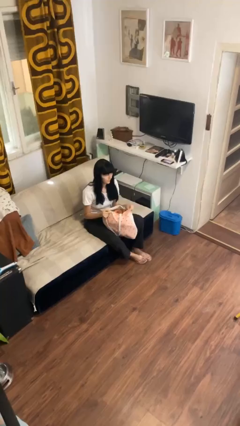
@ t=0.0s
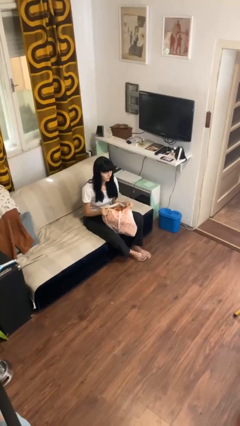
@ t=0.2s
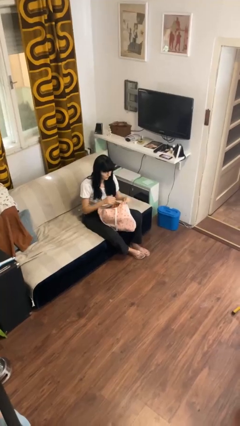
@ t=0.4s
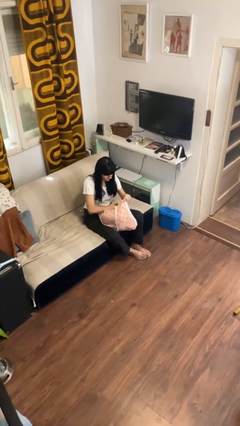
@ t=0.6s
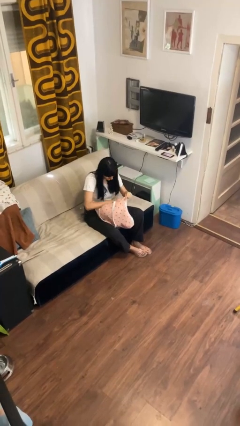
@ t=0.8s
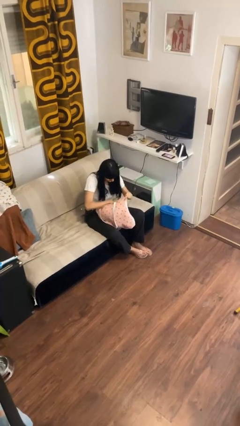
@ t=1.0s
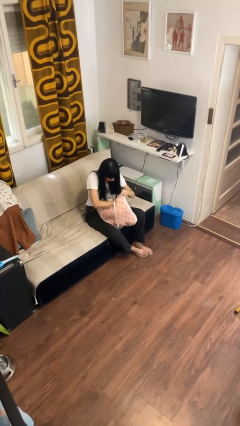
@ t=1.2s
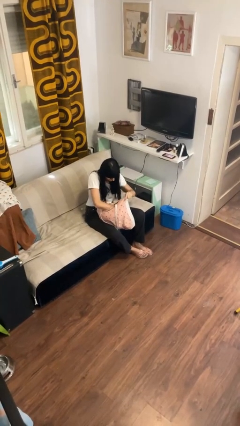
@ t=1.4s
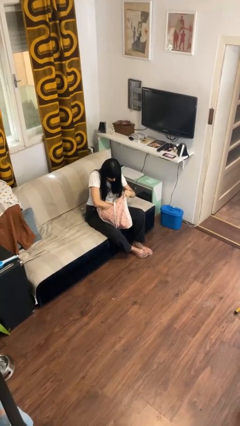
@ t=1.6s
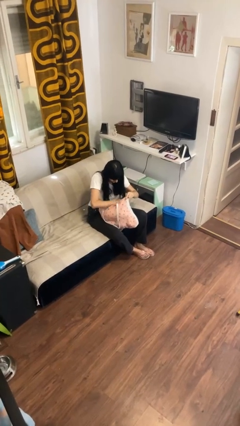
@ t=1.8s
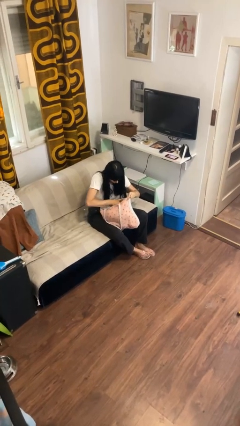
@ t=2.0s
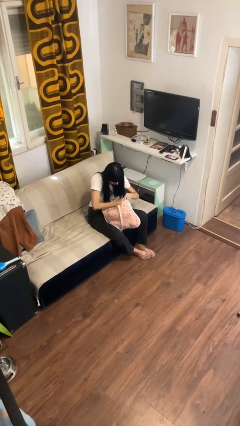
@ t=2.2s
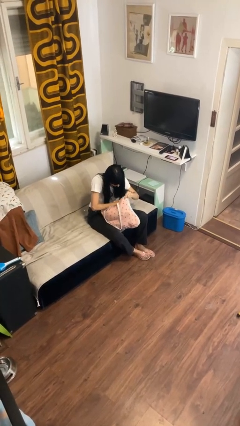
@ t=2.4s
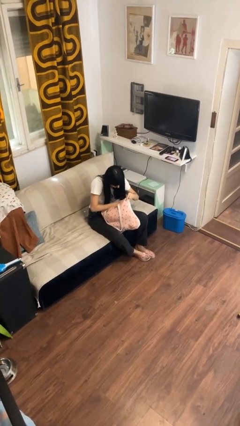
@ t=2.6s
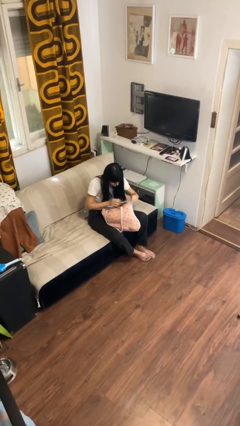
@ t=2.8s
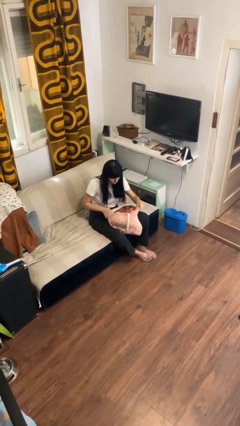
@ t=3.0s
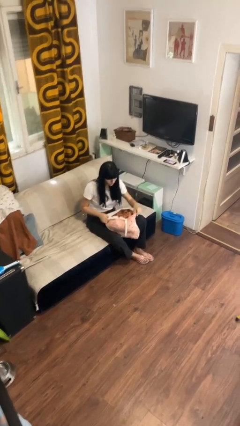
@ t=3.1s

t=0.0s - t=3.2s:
person searches in bag

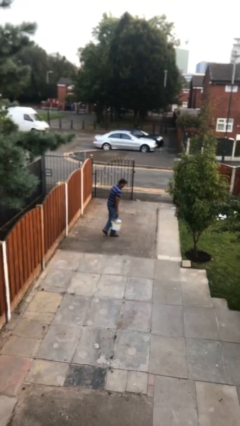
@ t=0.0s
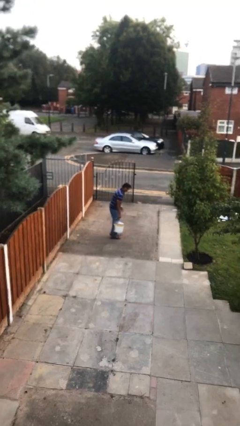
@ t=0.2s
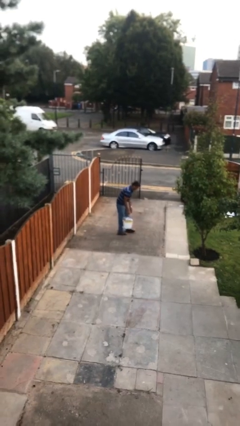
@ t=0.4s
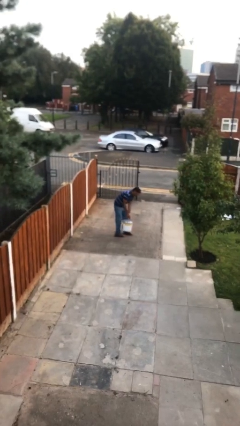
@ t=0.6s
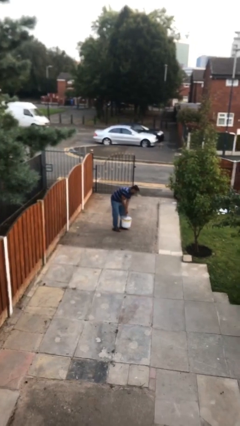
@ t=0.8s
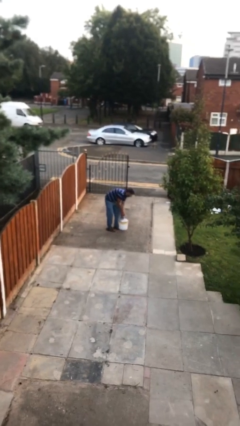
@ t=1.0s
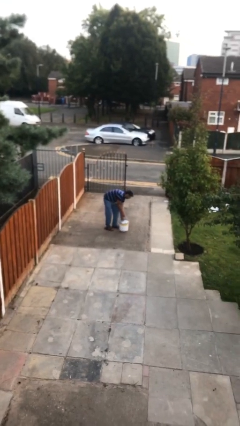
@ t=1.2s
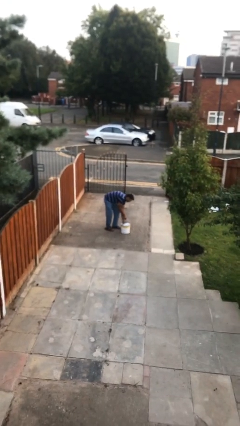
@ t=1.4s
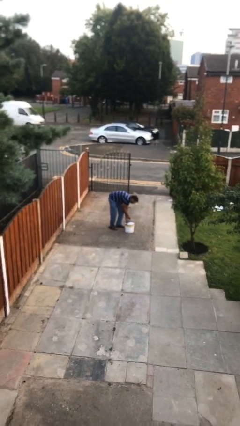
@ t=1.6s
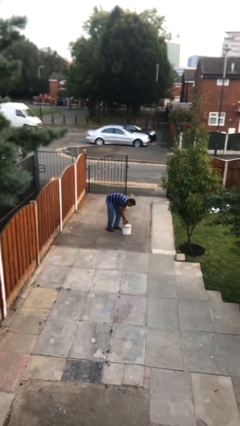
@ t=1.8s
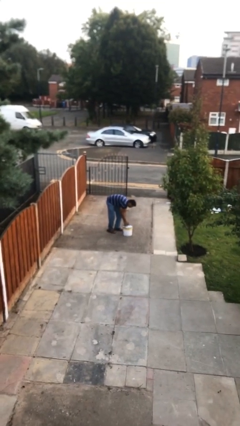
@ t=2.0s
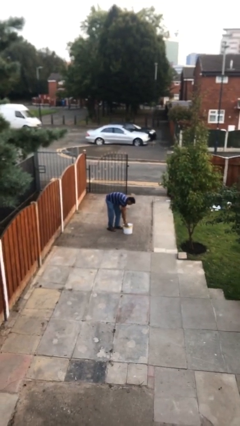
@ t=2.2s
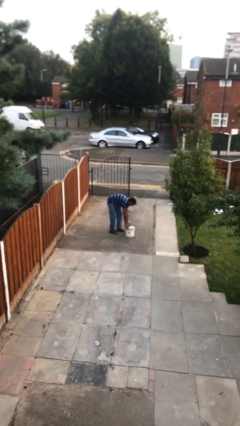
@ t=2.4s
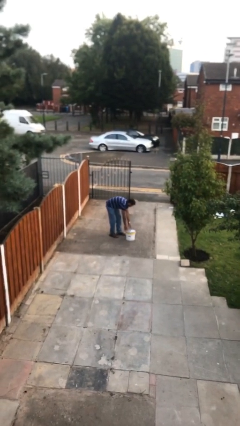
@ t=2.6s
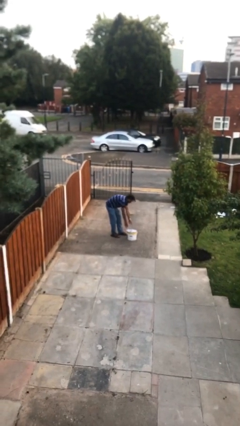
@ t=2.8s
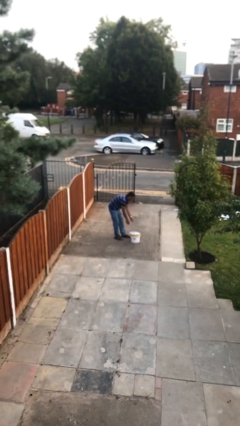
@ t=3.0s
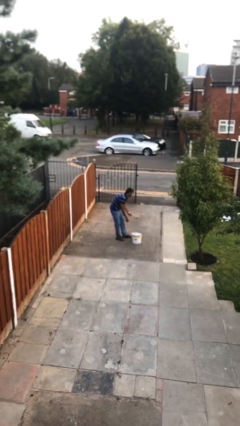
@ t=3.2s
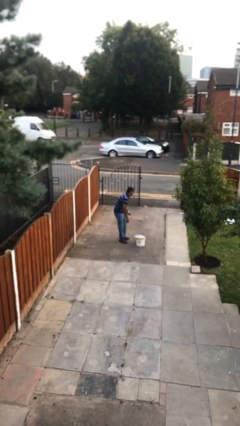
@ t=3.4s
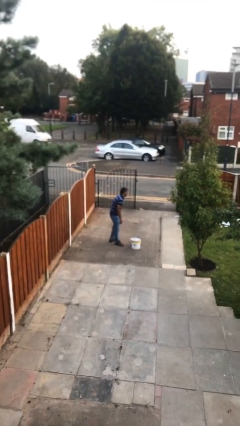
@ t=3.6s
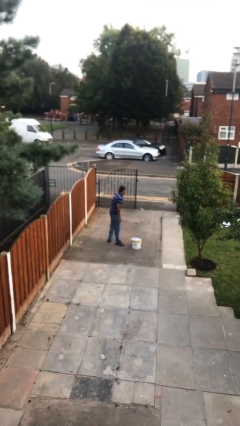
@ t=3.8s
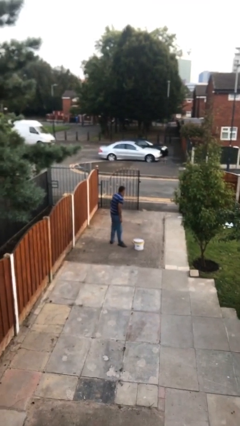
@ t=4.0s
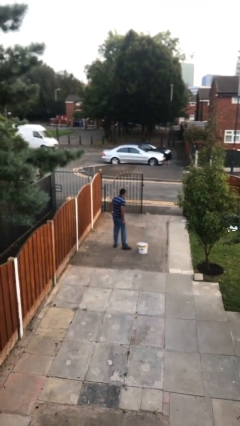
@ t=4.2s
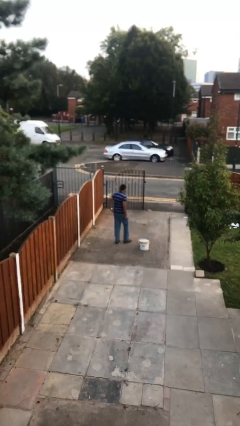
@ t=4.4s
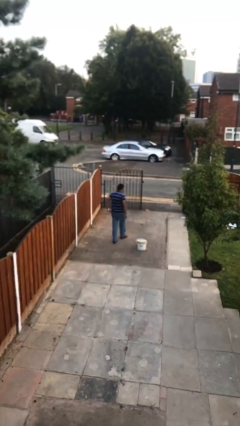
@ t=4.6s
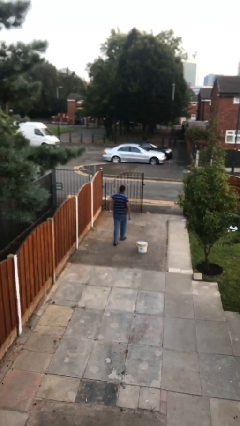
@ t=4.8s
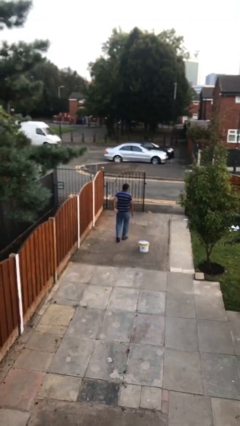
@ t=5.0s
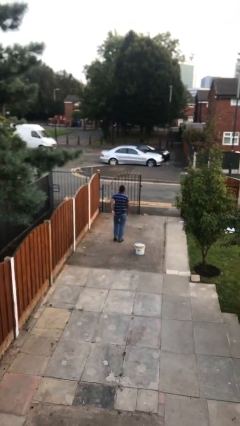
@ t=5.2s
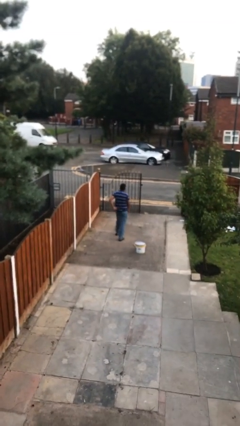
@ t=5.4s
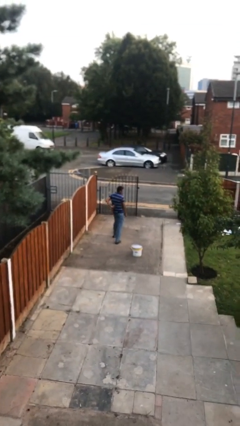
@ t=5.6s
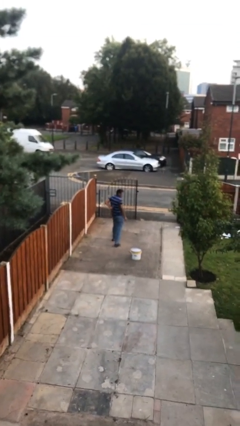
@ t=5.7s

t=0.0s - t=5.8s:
person puts down object on floor

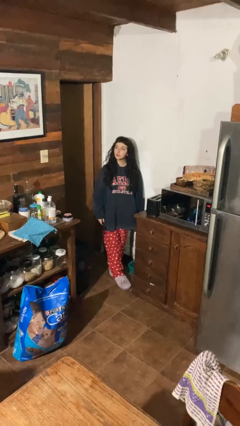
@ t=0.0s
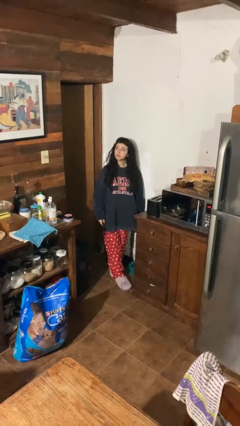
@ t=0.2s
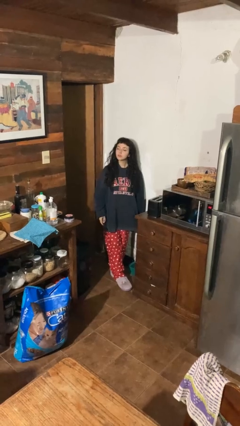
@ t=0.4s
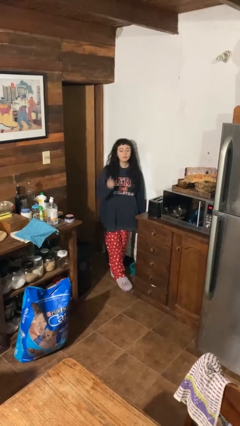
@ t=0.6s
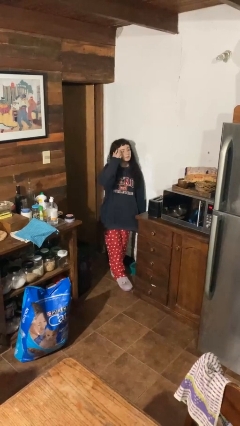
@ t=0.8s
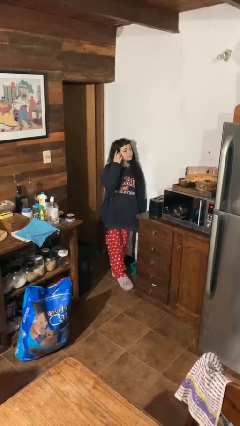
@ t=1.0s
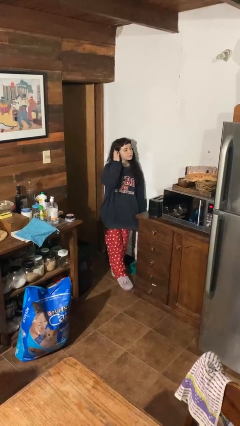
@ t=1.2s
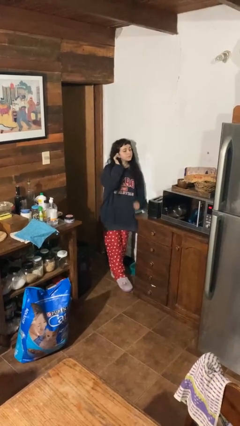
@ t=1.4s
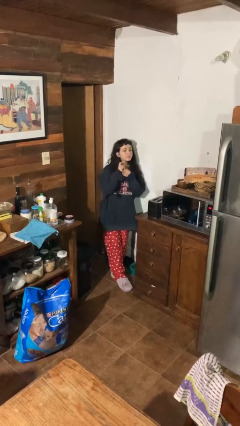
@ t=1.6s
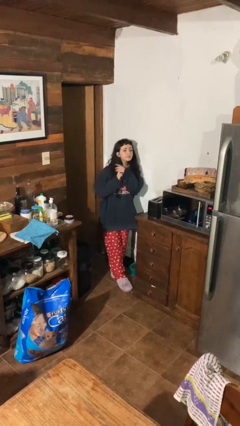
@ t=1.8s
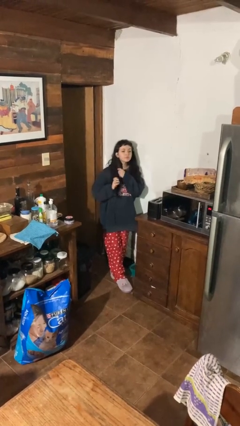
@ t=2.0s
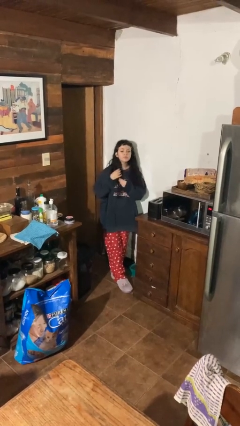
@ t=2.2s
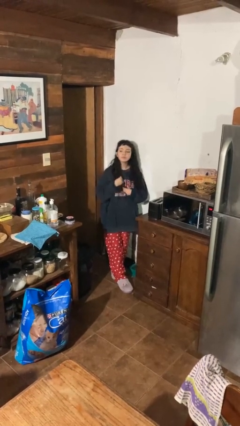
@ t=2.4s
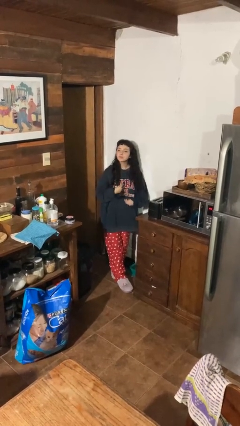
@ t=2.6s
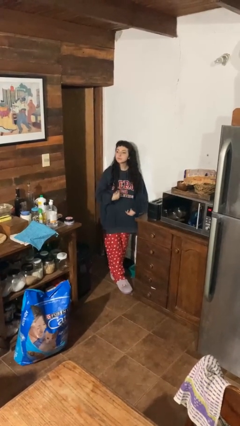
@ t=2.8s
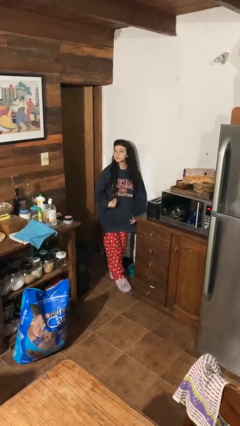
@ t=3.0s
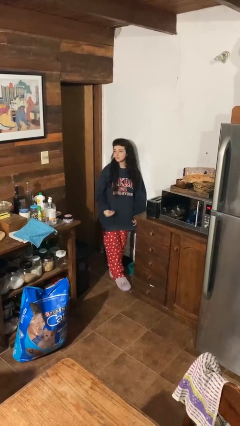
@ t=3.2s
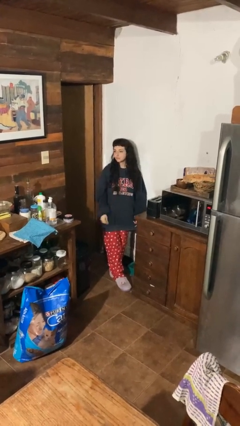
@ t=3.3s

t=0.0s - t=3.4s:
person strokes hair

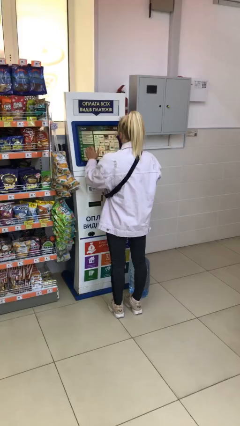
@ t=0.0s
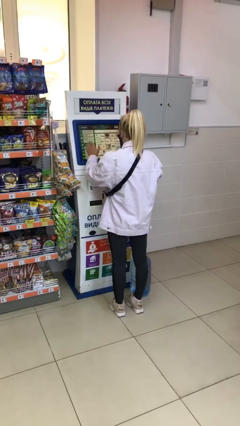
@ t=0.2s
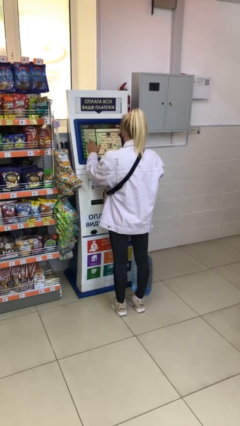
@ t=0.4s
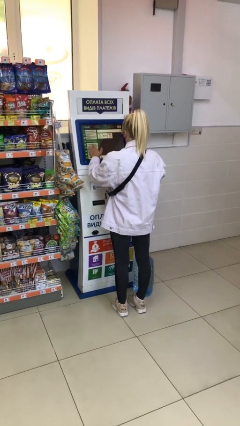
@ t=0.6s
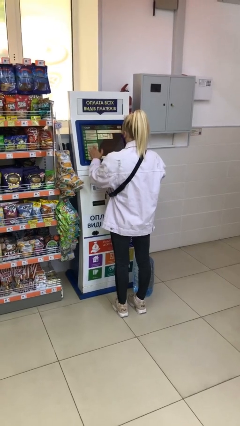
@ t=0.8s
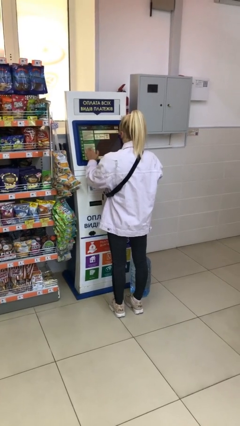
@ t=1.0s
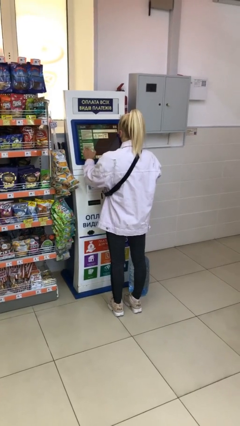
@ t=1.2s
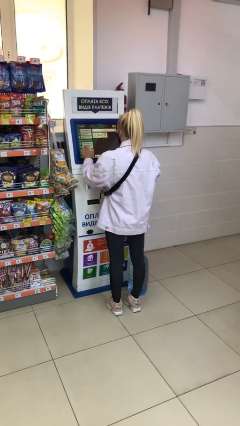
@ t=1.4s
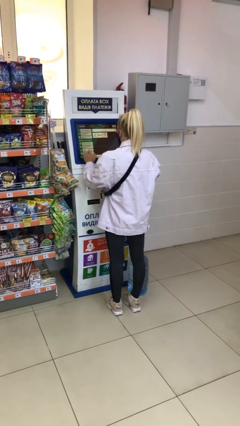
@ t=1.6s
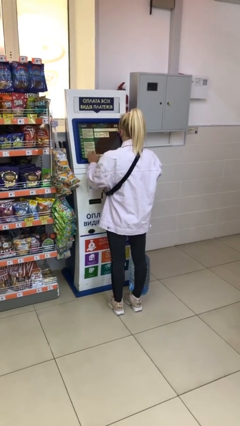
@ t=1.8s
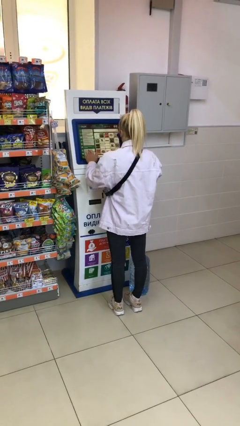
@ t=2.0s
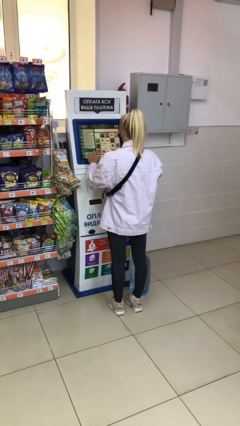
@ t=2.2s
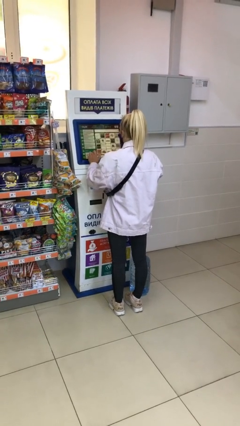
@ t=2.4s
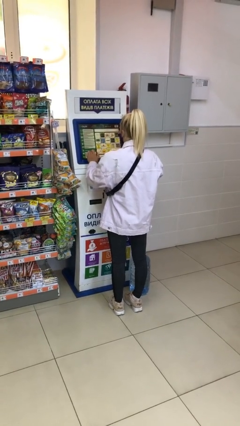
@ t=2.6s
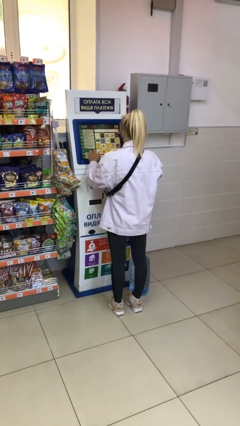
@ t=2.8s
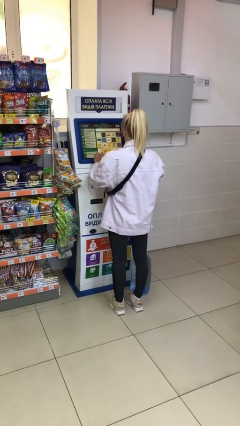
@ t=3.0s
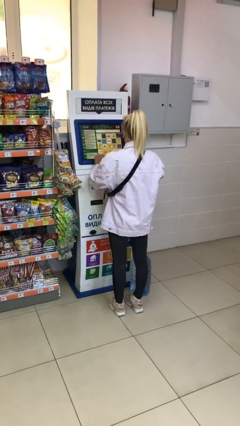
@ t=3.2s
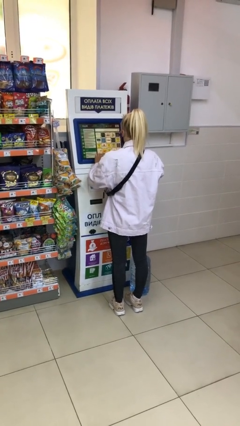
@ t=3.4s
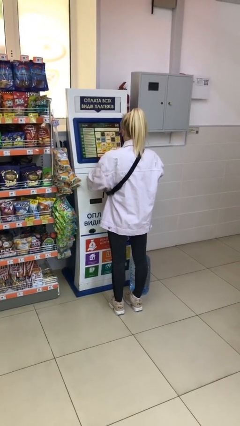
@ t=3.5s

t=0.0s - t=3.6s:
person purchases from machine

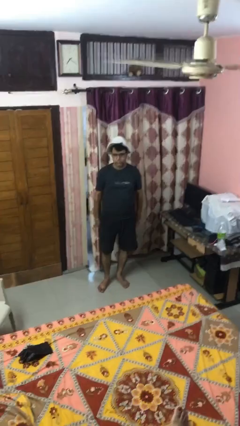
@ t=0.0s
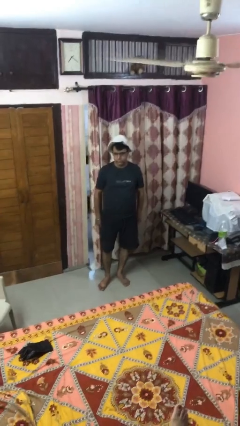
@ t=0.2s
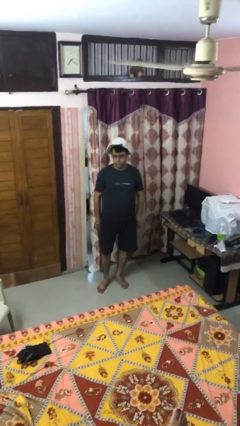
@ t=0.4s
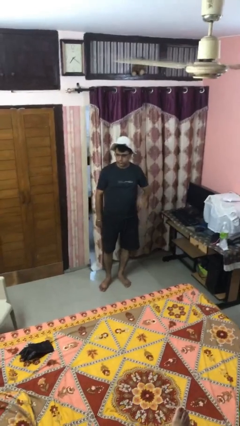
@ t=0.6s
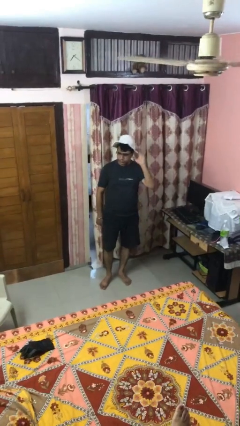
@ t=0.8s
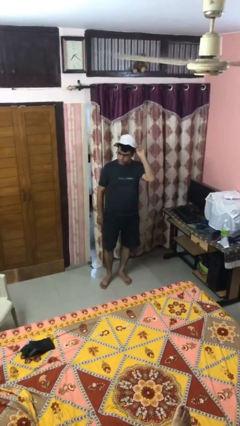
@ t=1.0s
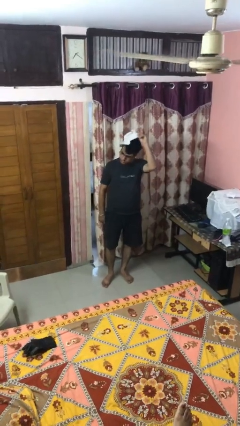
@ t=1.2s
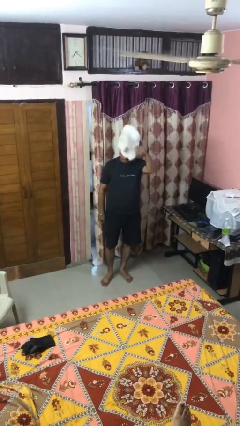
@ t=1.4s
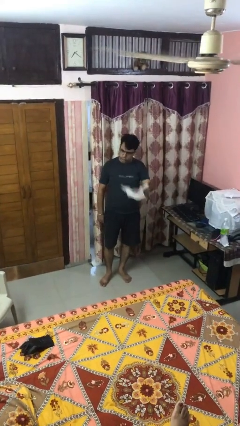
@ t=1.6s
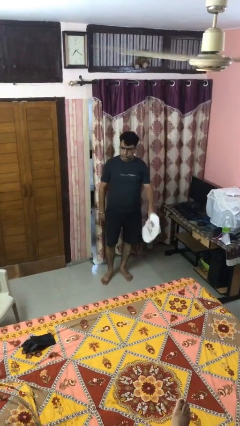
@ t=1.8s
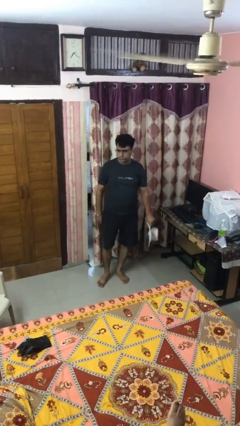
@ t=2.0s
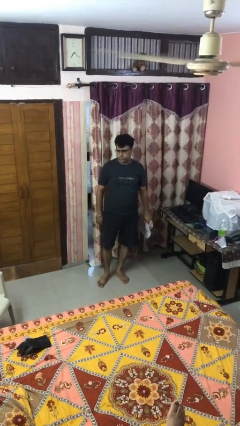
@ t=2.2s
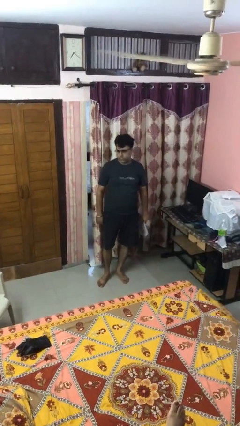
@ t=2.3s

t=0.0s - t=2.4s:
person takes off hat
